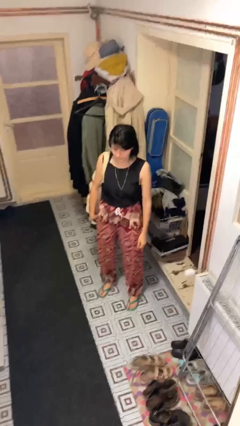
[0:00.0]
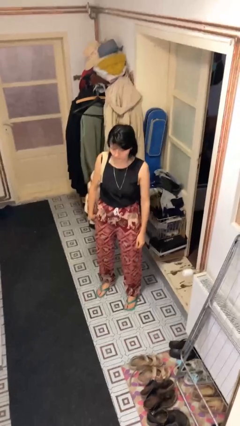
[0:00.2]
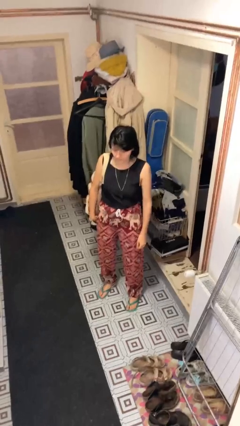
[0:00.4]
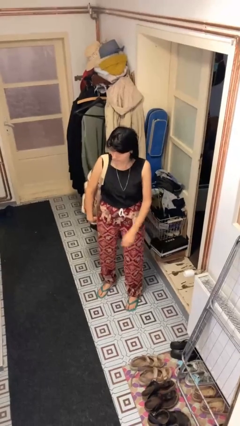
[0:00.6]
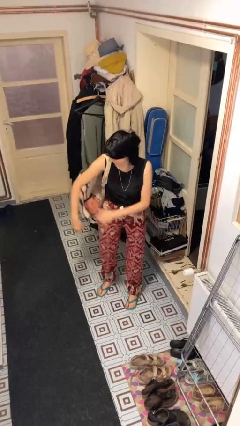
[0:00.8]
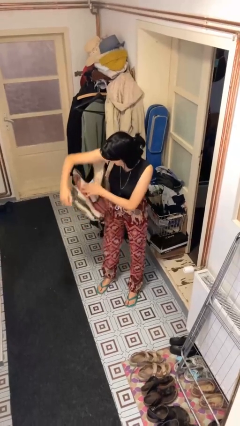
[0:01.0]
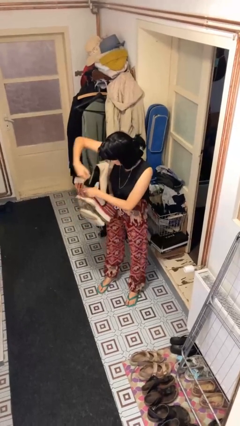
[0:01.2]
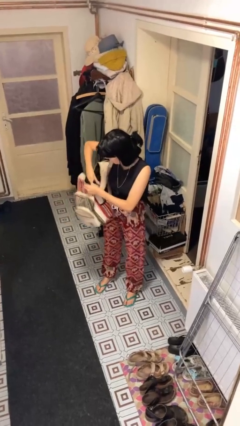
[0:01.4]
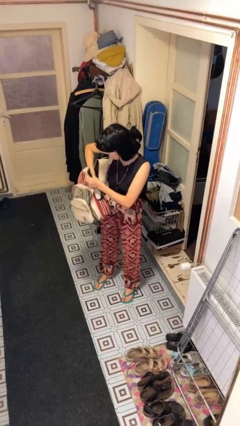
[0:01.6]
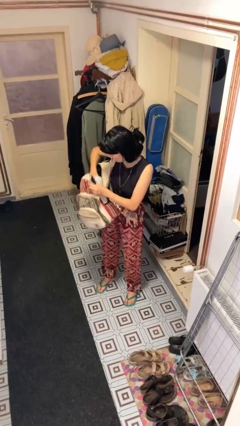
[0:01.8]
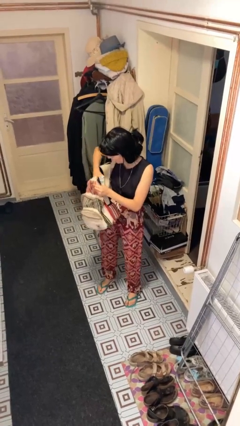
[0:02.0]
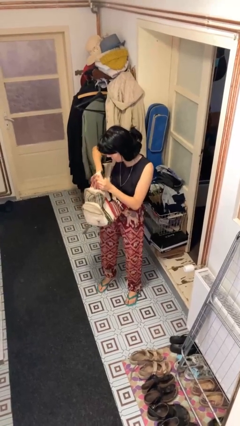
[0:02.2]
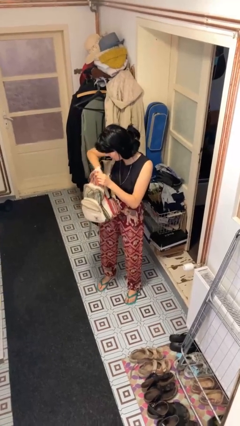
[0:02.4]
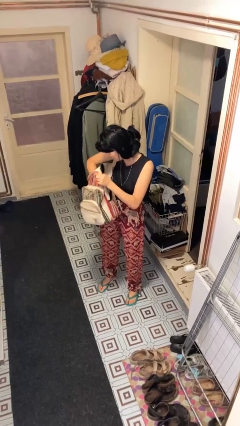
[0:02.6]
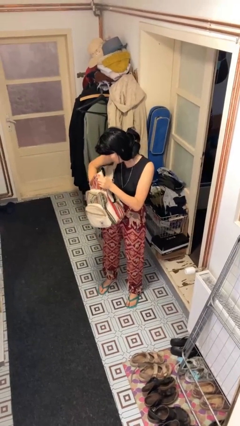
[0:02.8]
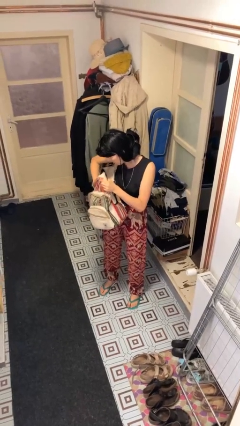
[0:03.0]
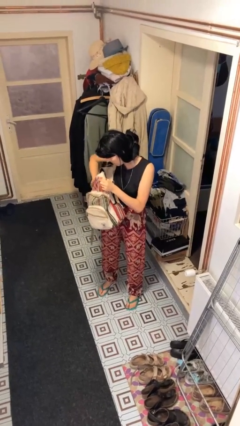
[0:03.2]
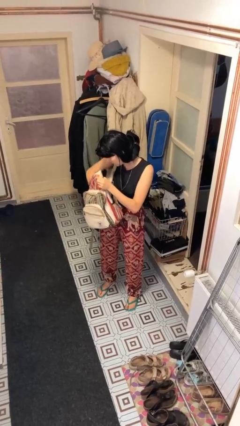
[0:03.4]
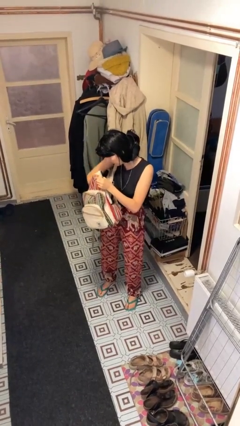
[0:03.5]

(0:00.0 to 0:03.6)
person searches in backpack

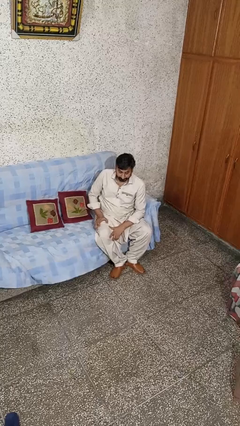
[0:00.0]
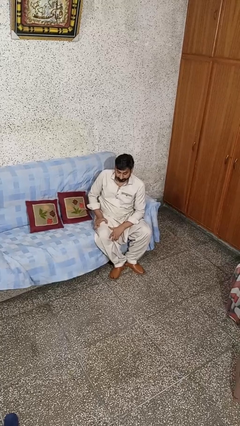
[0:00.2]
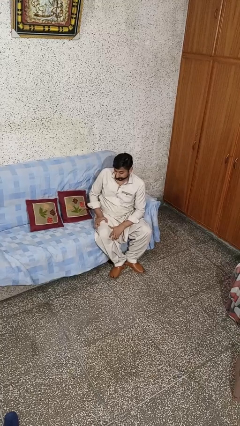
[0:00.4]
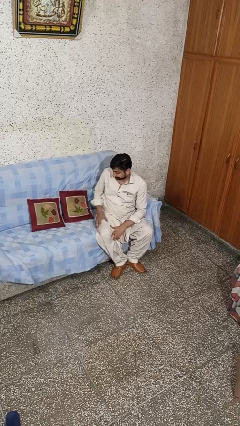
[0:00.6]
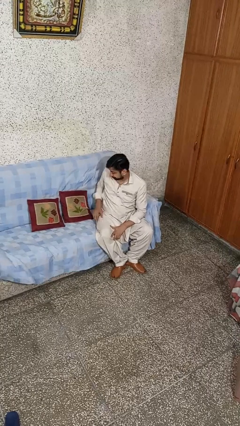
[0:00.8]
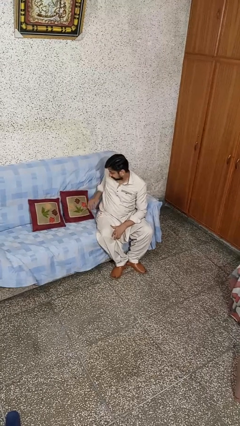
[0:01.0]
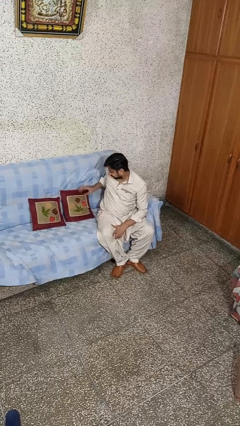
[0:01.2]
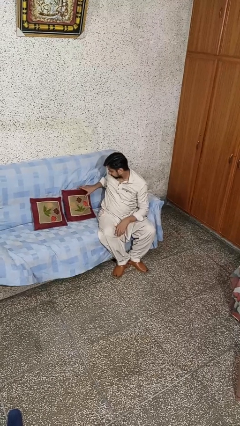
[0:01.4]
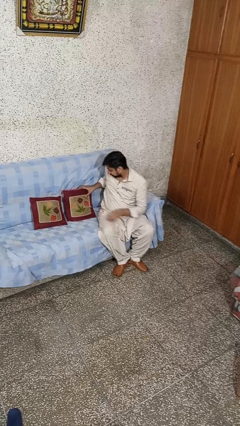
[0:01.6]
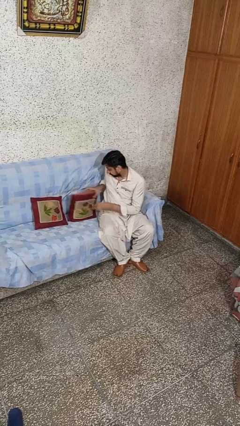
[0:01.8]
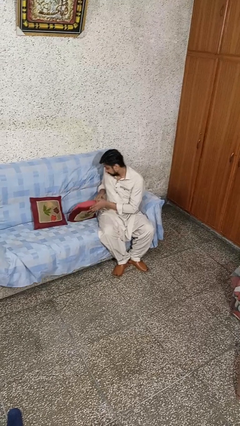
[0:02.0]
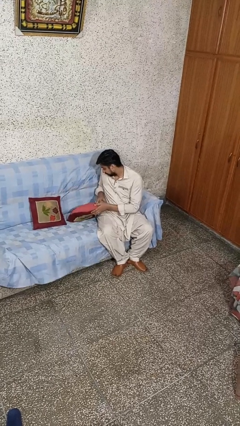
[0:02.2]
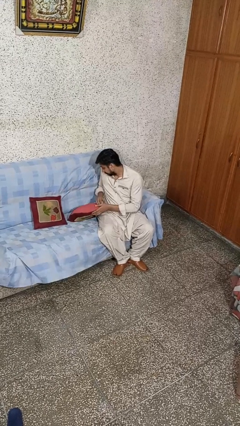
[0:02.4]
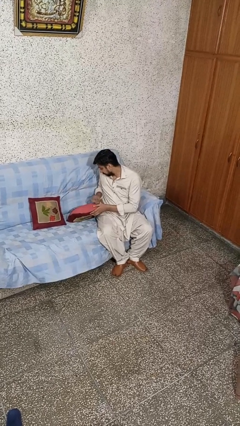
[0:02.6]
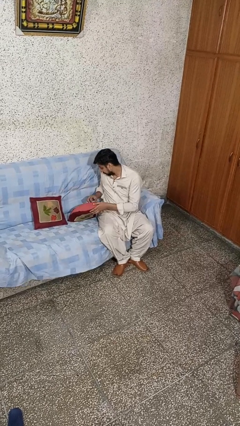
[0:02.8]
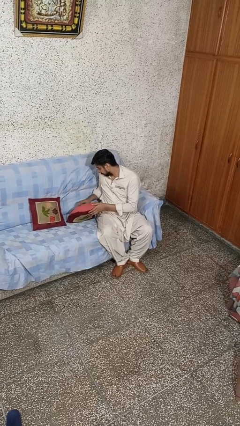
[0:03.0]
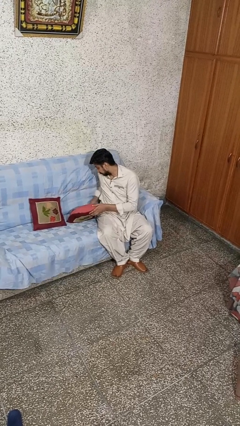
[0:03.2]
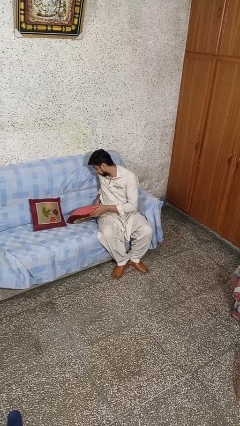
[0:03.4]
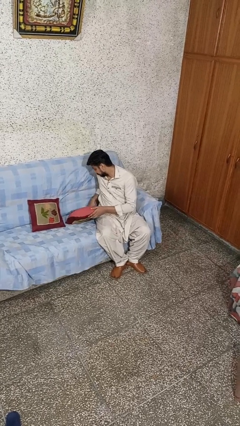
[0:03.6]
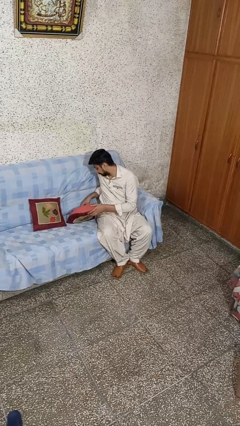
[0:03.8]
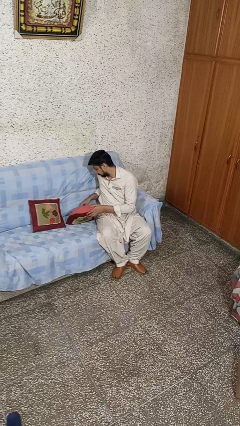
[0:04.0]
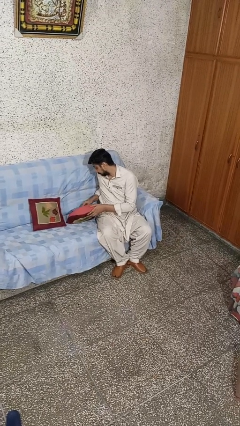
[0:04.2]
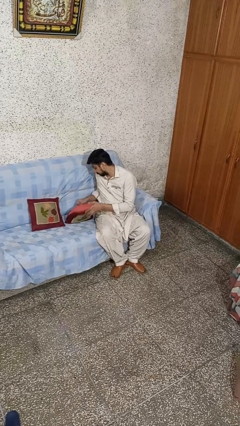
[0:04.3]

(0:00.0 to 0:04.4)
person searches in couch

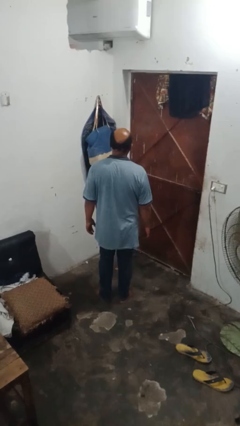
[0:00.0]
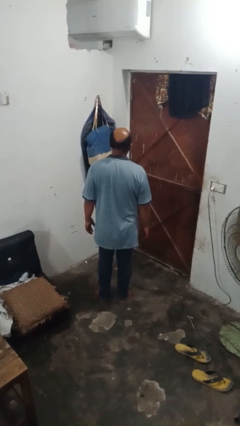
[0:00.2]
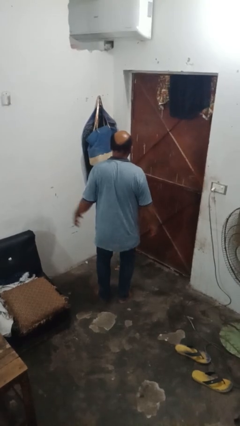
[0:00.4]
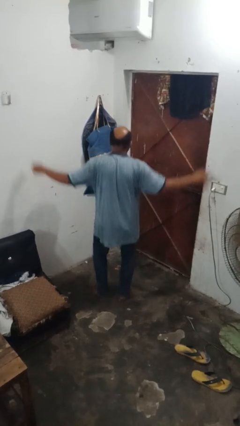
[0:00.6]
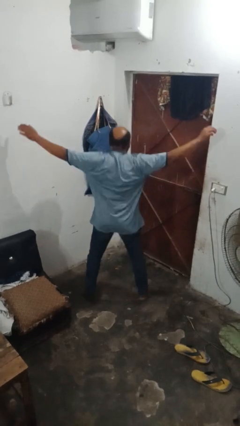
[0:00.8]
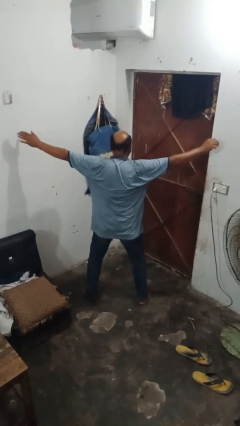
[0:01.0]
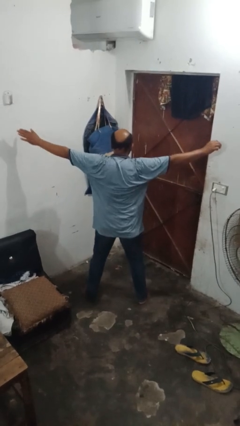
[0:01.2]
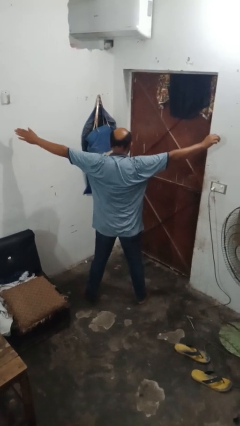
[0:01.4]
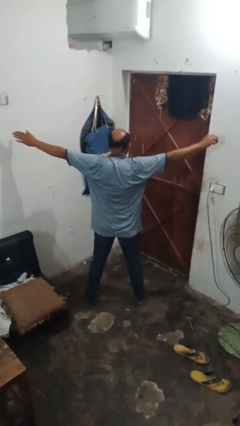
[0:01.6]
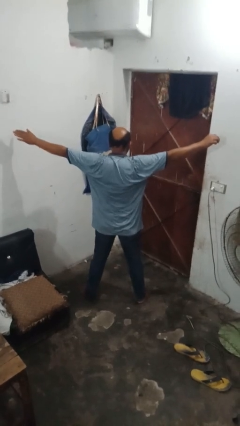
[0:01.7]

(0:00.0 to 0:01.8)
person exercises with jumping jacks

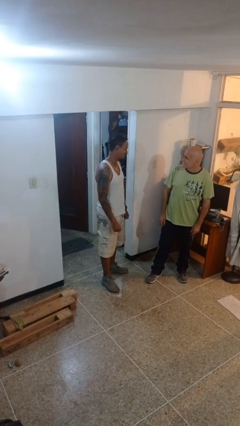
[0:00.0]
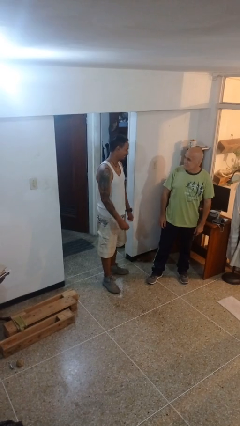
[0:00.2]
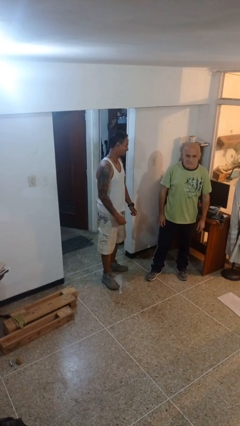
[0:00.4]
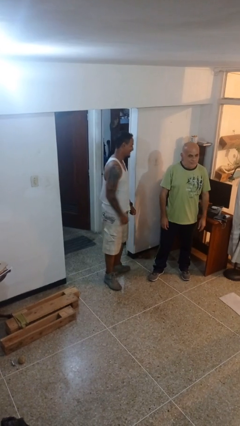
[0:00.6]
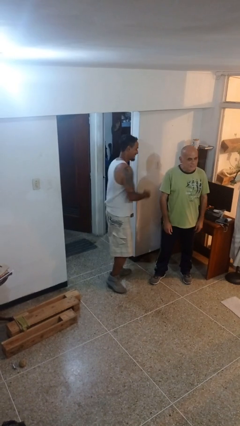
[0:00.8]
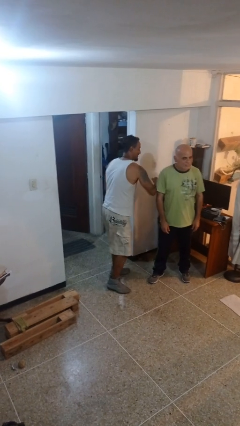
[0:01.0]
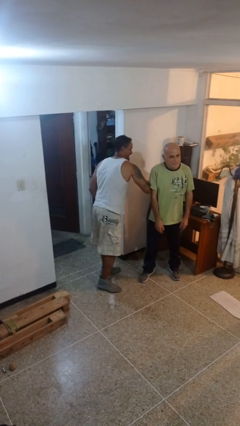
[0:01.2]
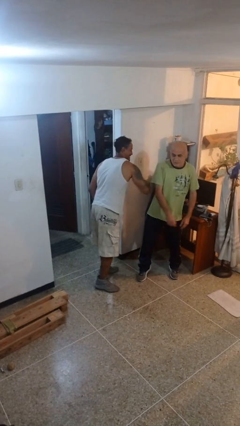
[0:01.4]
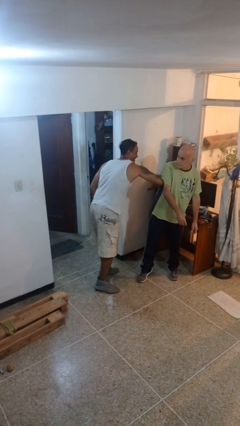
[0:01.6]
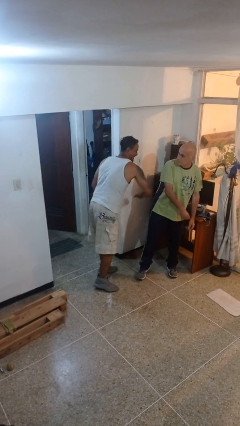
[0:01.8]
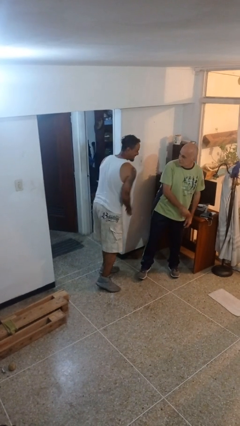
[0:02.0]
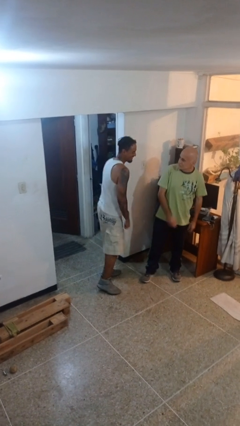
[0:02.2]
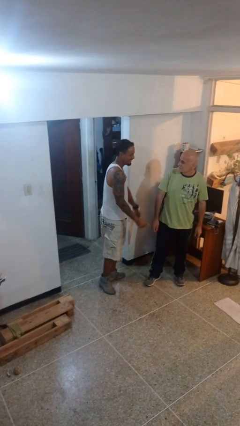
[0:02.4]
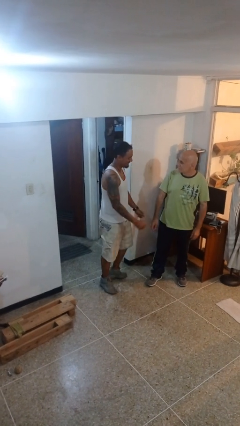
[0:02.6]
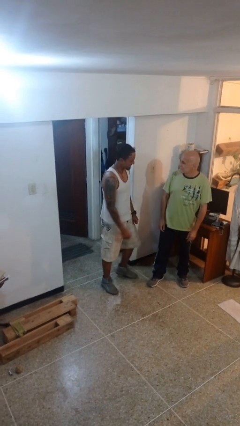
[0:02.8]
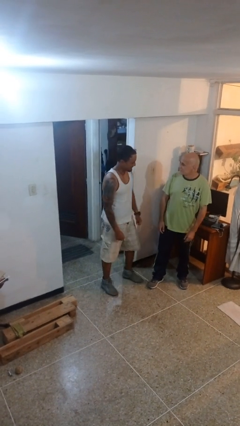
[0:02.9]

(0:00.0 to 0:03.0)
person nudges person with elbow

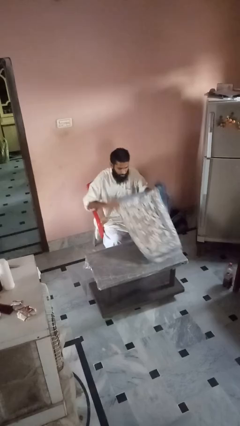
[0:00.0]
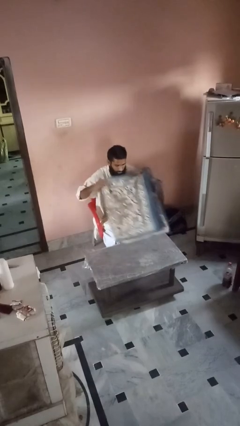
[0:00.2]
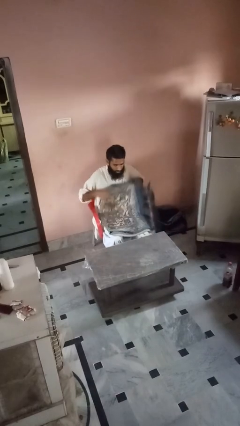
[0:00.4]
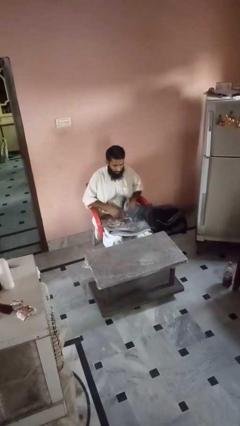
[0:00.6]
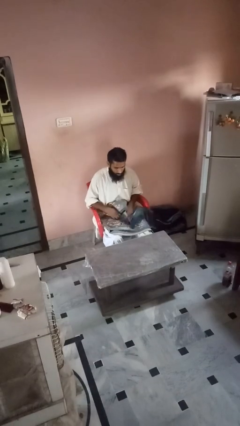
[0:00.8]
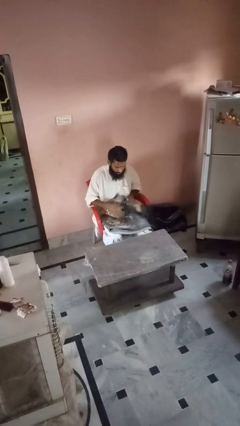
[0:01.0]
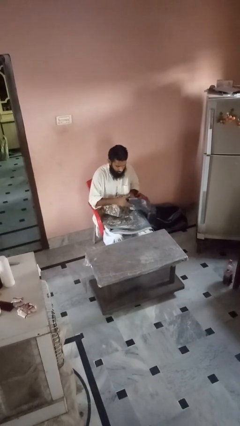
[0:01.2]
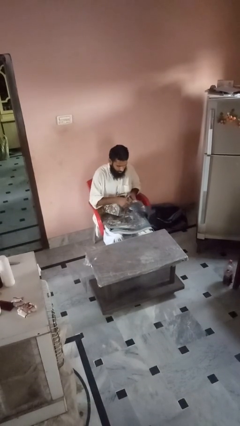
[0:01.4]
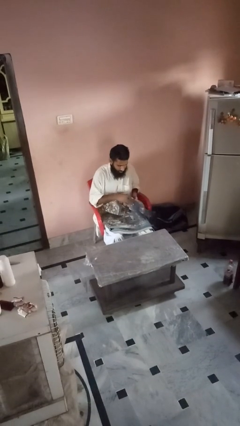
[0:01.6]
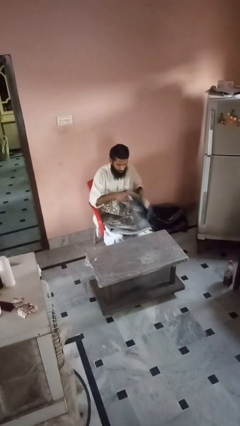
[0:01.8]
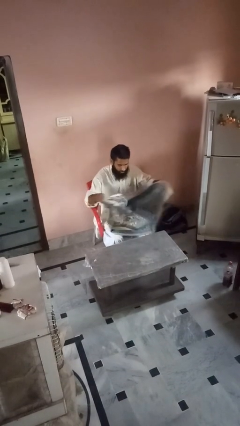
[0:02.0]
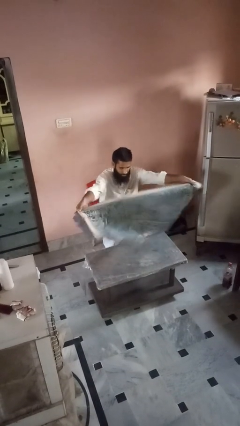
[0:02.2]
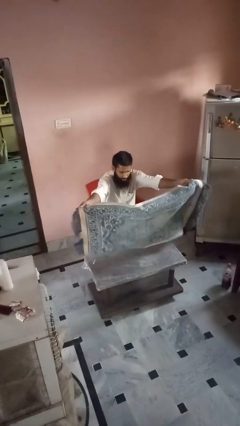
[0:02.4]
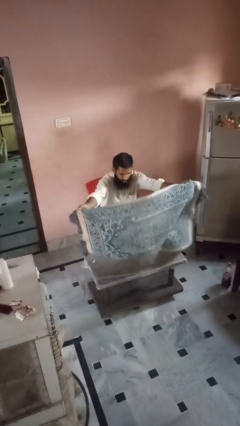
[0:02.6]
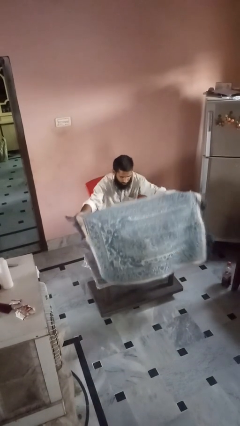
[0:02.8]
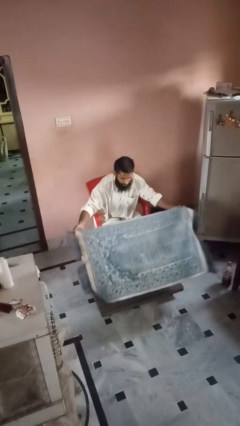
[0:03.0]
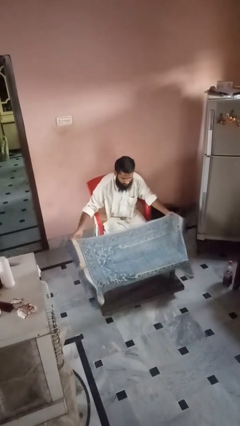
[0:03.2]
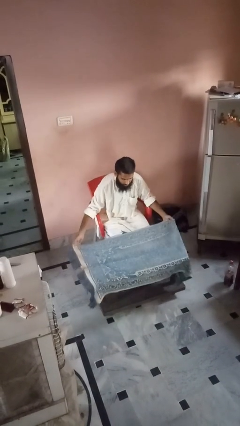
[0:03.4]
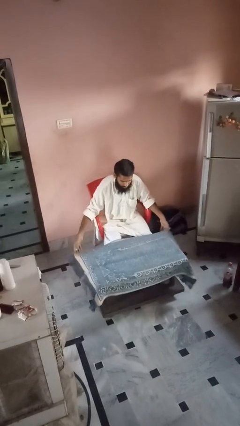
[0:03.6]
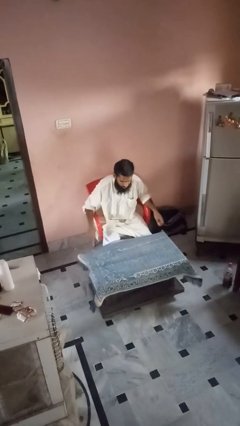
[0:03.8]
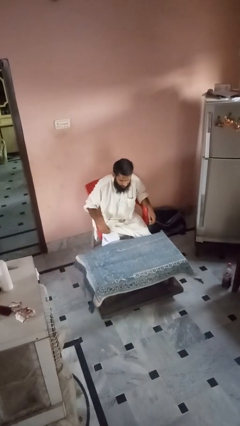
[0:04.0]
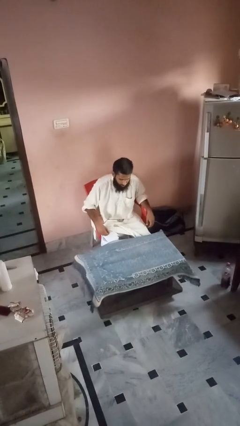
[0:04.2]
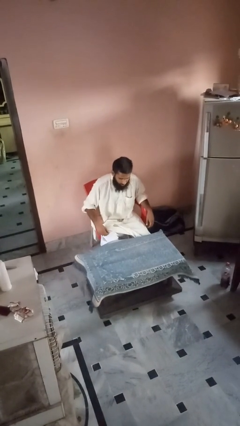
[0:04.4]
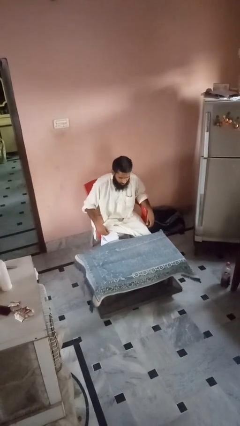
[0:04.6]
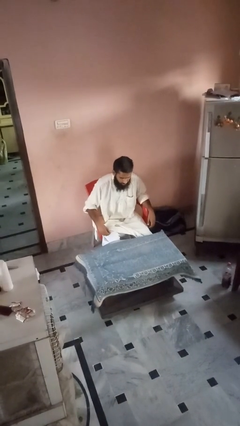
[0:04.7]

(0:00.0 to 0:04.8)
person spreads tablecloth
